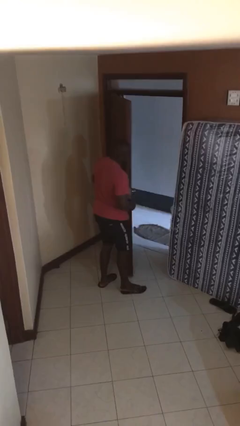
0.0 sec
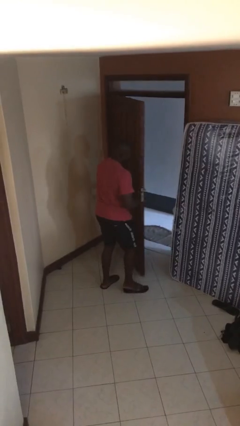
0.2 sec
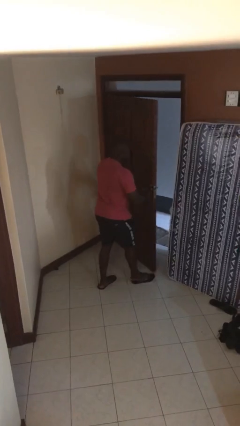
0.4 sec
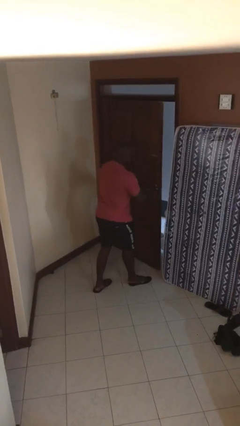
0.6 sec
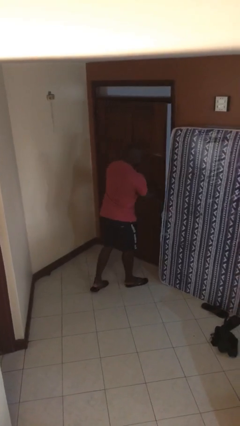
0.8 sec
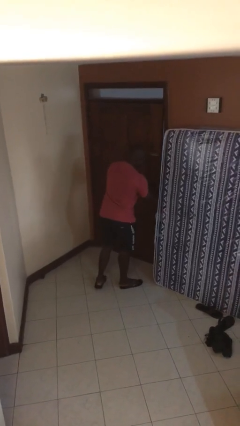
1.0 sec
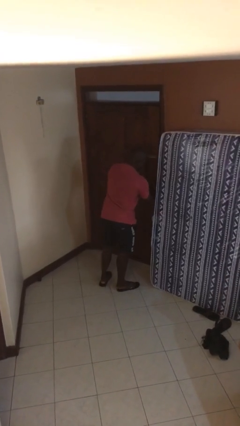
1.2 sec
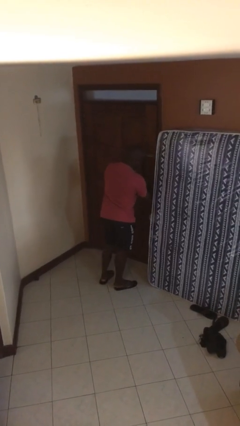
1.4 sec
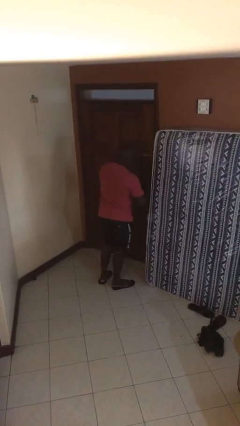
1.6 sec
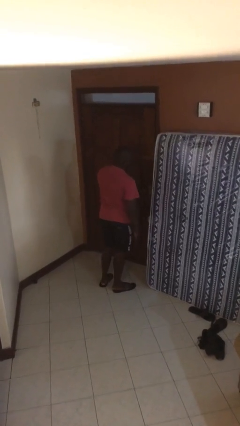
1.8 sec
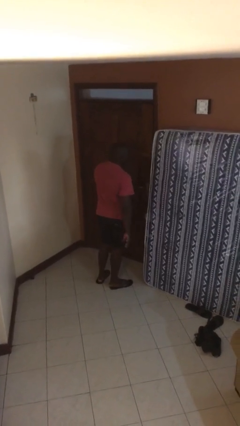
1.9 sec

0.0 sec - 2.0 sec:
person closes facility door

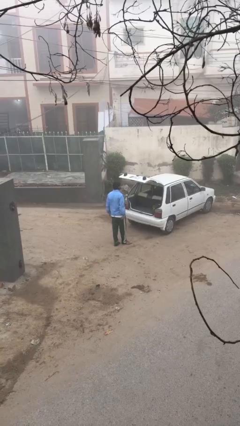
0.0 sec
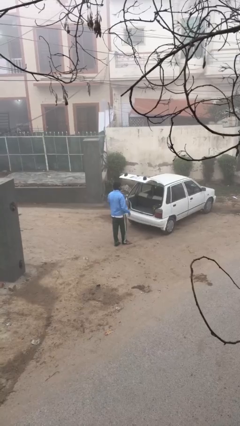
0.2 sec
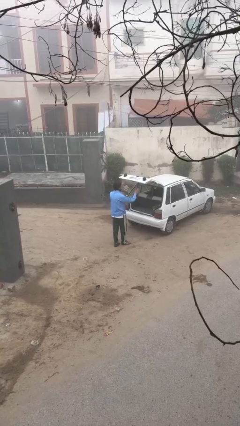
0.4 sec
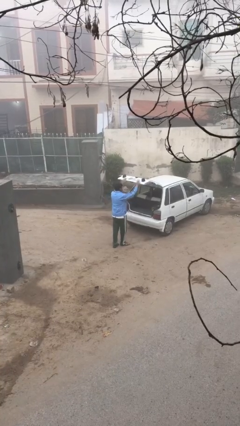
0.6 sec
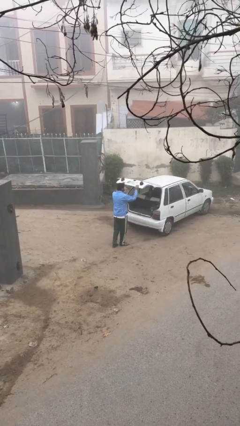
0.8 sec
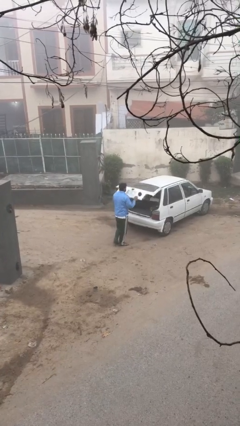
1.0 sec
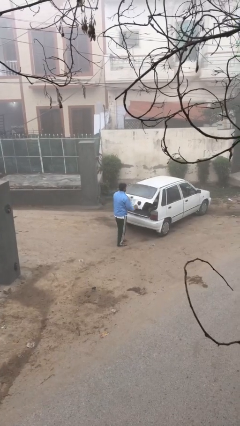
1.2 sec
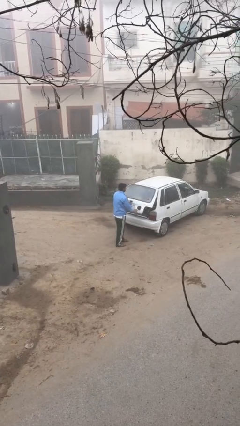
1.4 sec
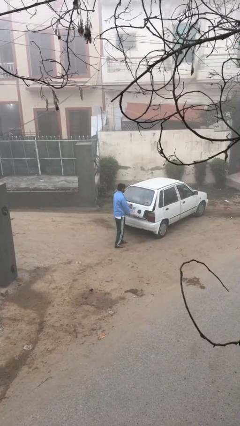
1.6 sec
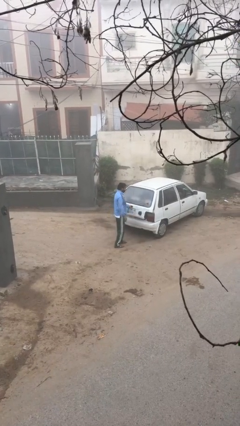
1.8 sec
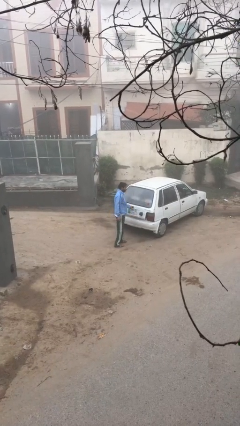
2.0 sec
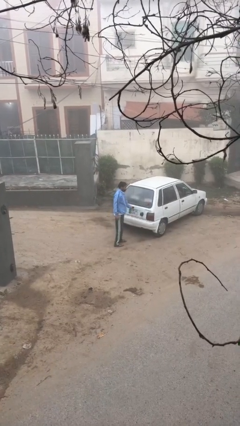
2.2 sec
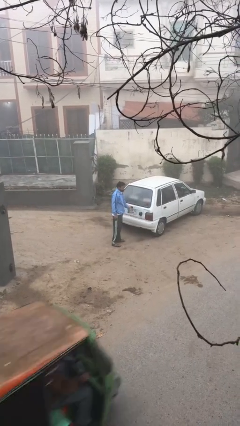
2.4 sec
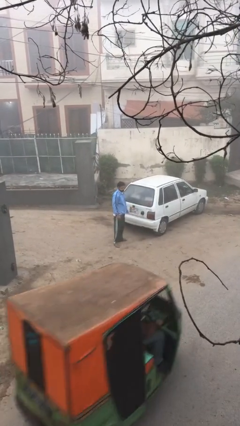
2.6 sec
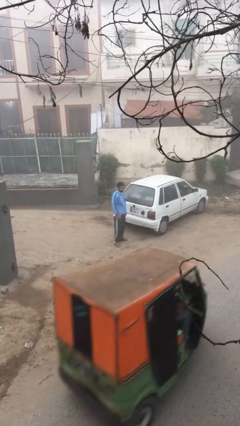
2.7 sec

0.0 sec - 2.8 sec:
person closes car trunk

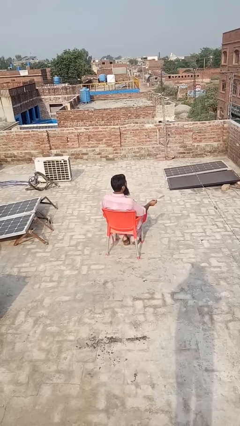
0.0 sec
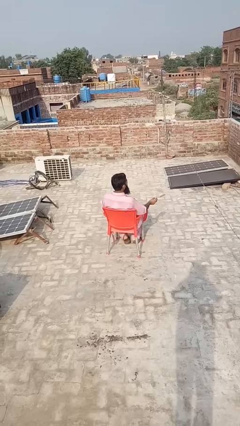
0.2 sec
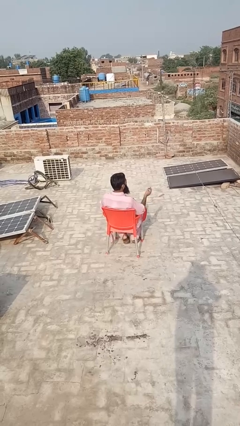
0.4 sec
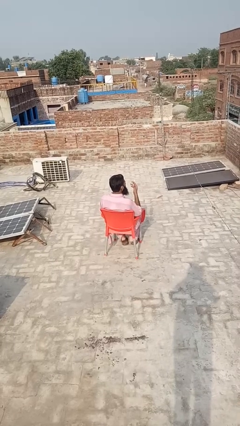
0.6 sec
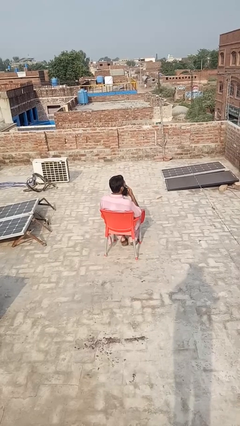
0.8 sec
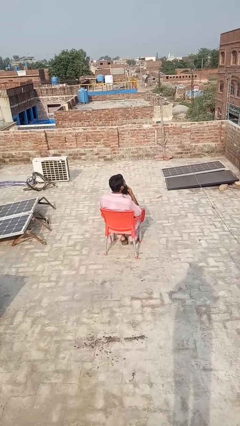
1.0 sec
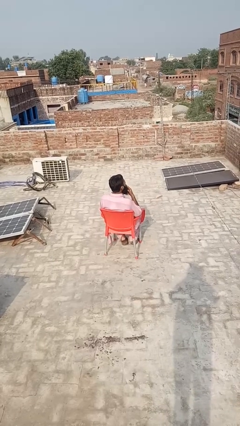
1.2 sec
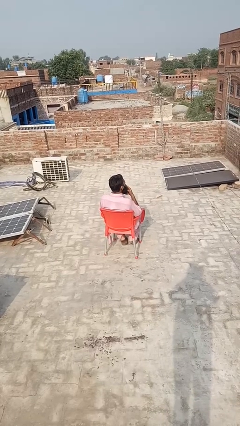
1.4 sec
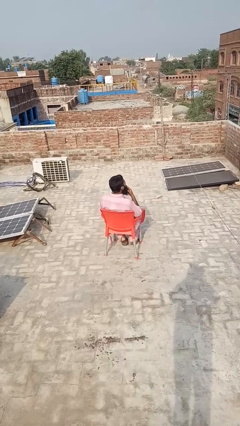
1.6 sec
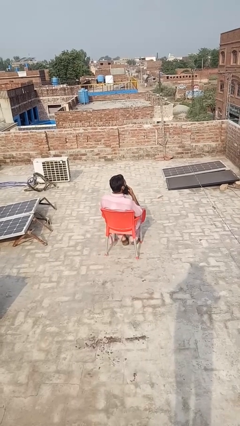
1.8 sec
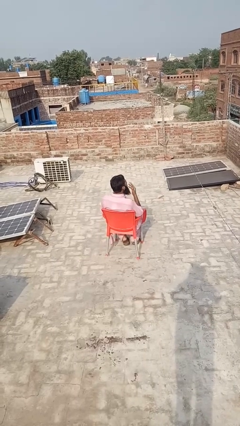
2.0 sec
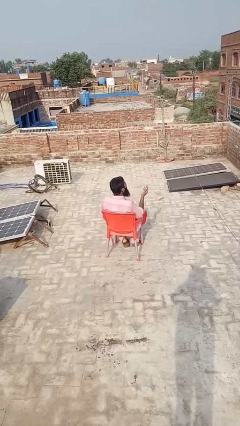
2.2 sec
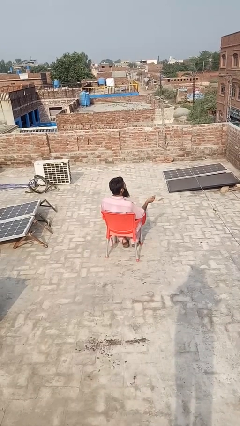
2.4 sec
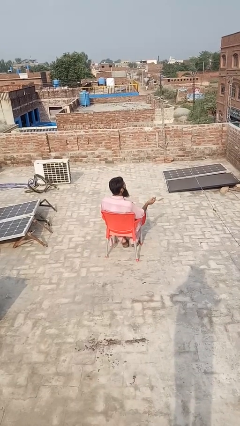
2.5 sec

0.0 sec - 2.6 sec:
person vapes

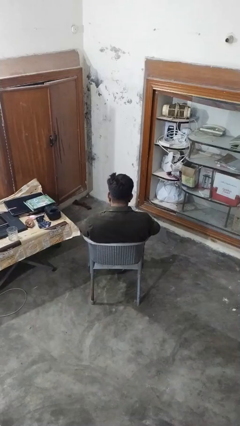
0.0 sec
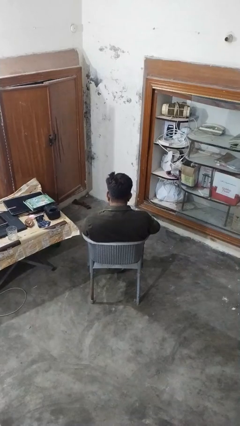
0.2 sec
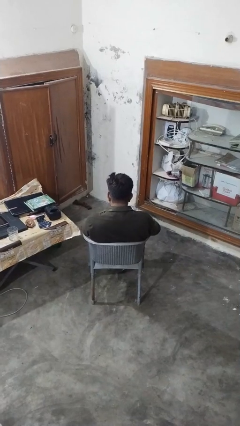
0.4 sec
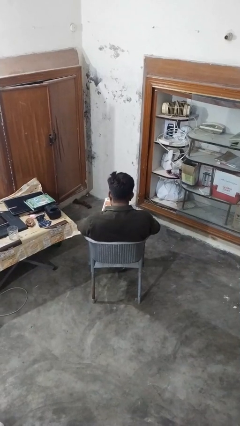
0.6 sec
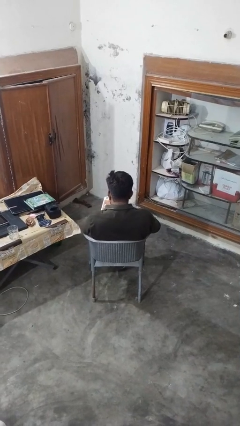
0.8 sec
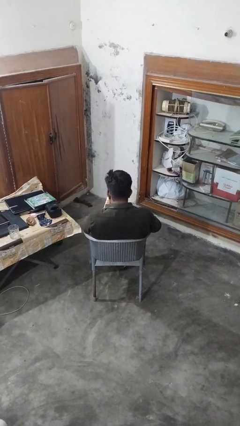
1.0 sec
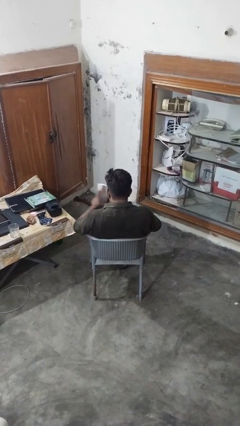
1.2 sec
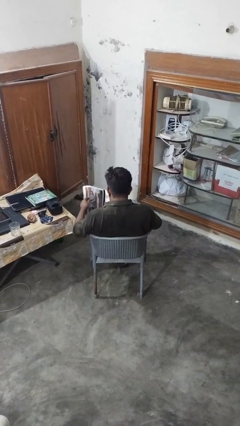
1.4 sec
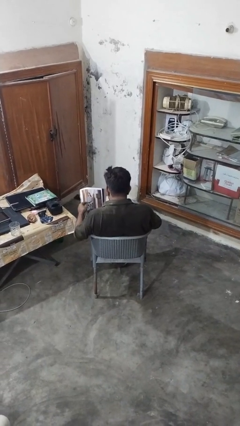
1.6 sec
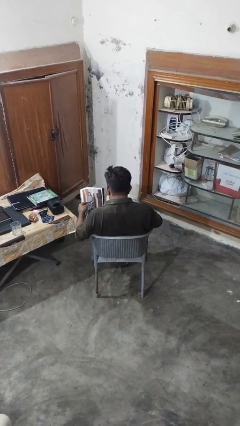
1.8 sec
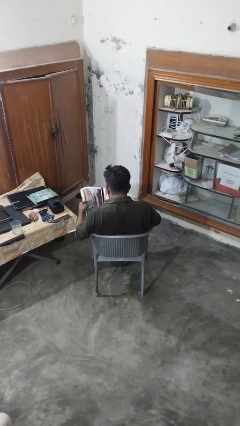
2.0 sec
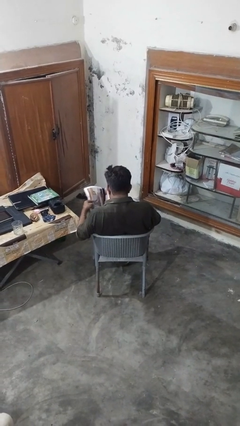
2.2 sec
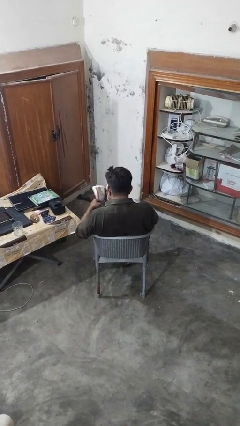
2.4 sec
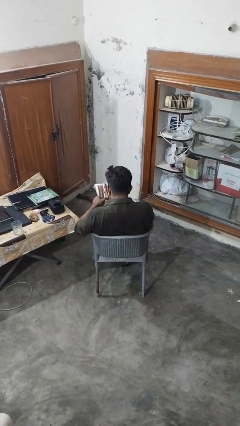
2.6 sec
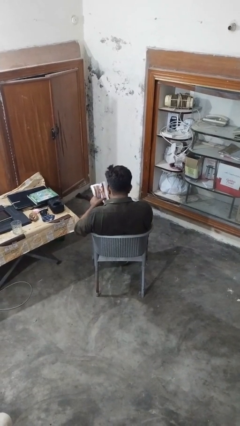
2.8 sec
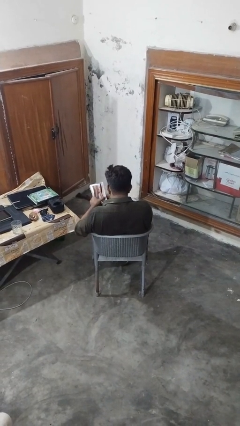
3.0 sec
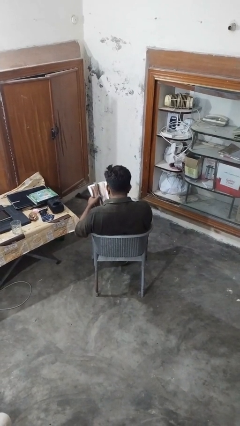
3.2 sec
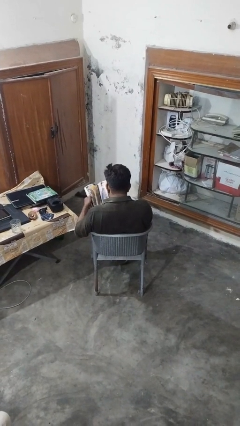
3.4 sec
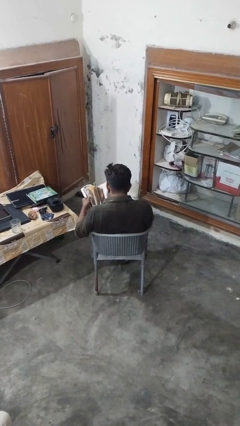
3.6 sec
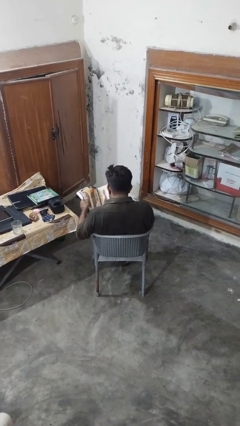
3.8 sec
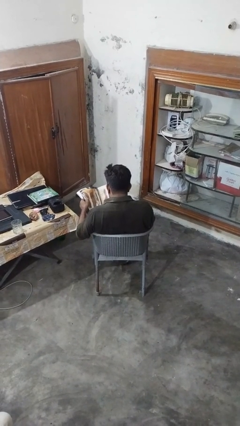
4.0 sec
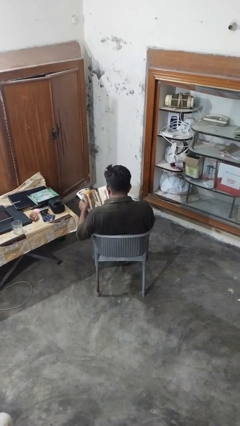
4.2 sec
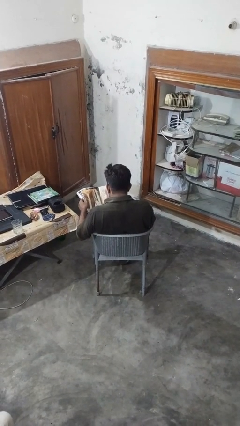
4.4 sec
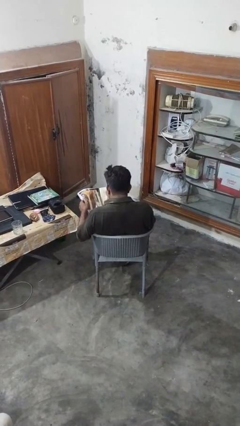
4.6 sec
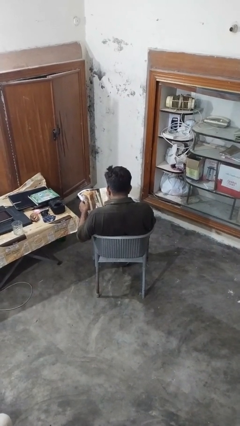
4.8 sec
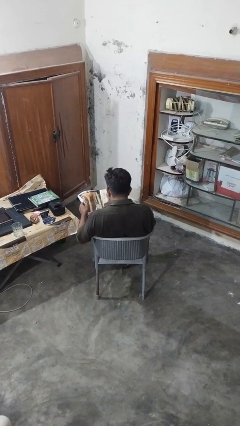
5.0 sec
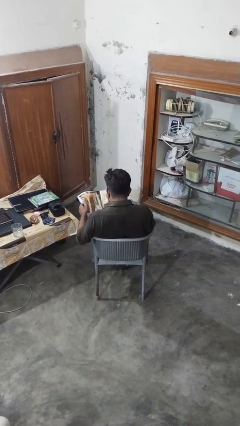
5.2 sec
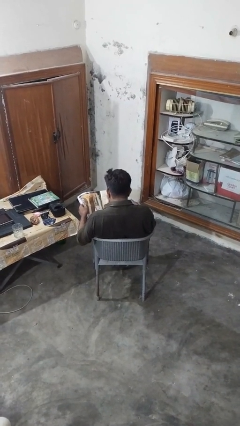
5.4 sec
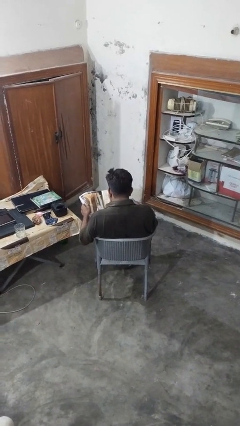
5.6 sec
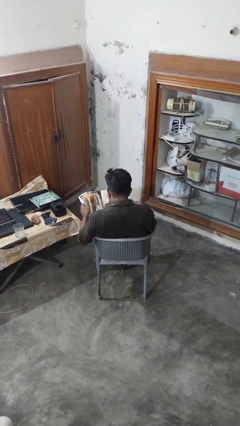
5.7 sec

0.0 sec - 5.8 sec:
person reads magazine

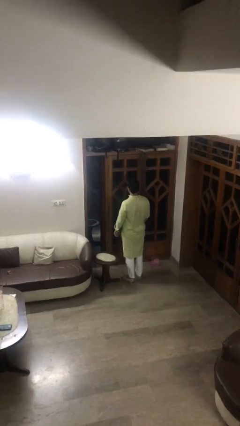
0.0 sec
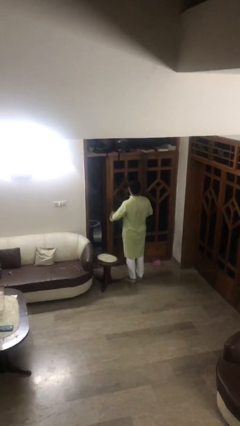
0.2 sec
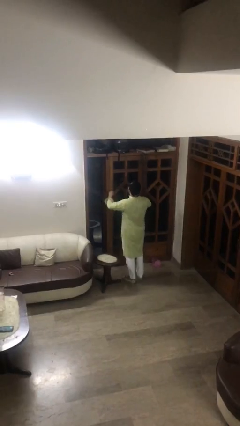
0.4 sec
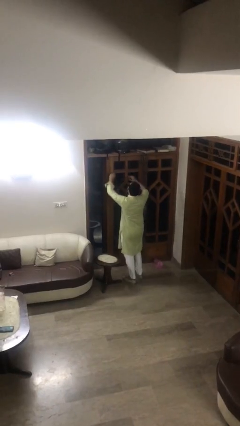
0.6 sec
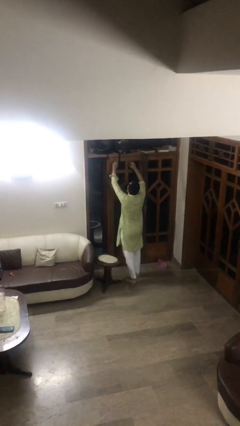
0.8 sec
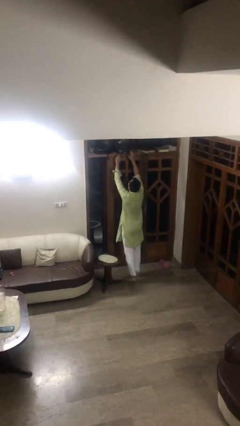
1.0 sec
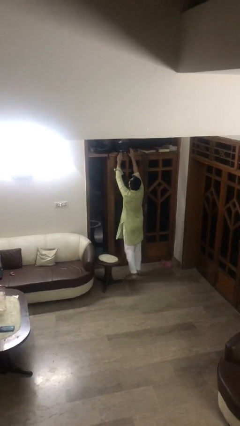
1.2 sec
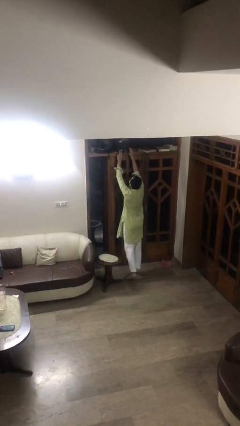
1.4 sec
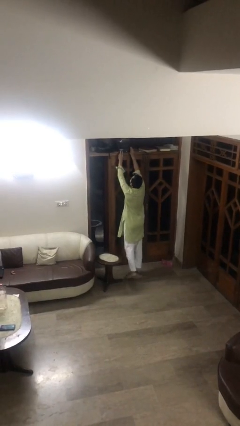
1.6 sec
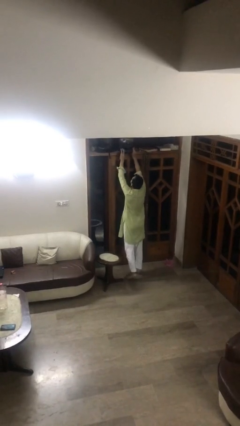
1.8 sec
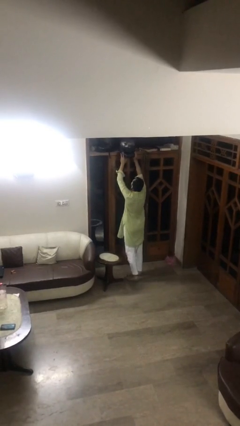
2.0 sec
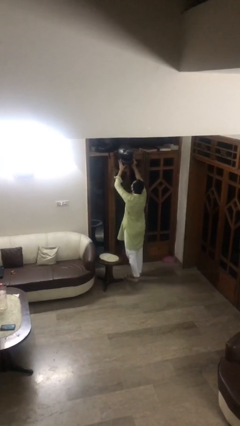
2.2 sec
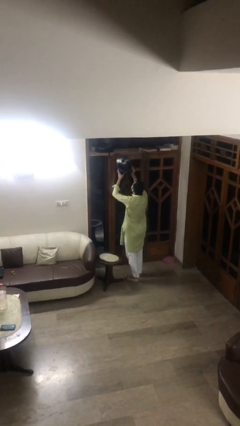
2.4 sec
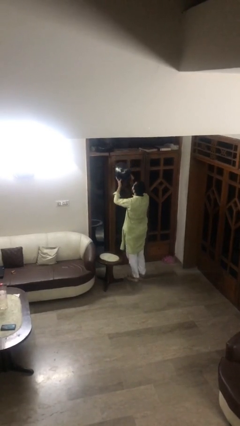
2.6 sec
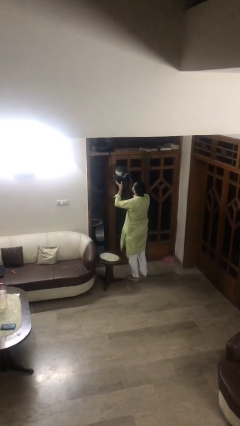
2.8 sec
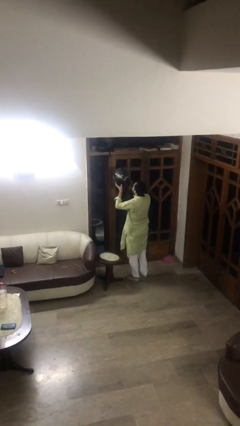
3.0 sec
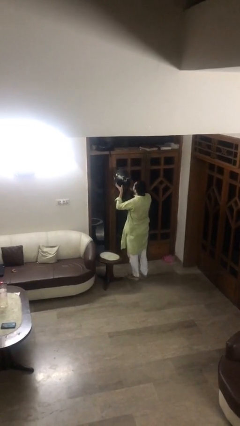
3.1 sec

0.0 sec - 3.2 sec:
person picks up object from shelf

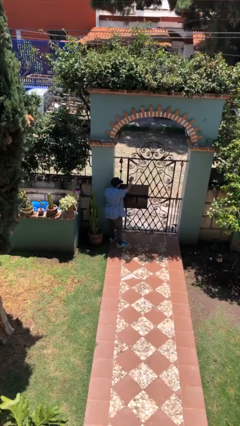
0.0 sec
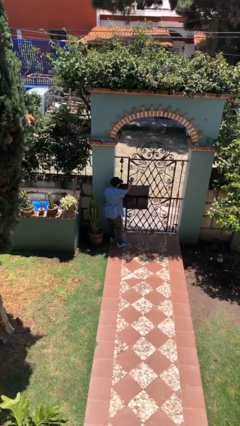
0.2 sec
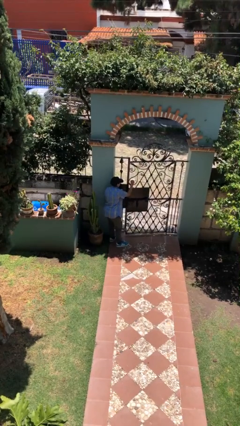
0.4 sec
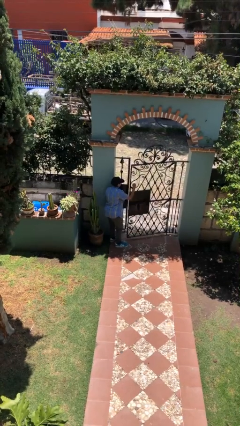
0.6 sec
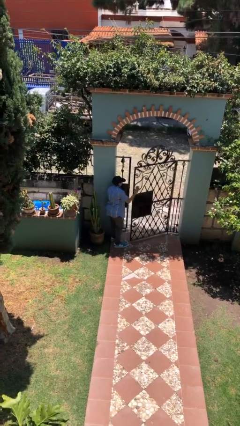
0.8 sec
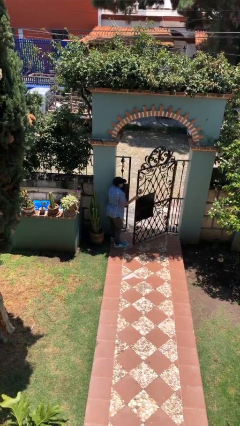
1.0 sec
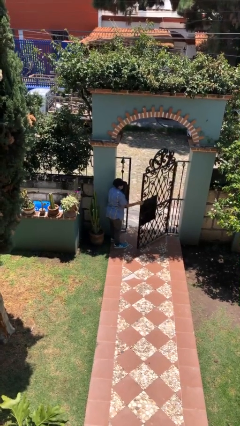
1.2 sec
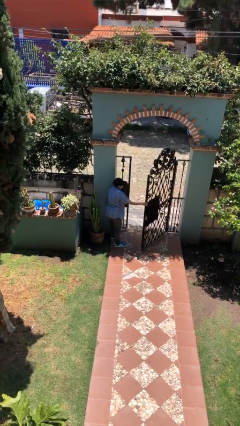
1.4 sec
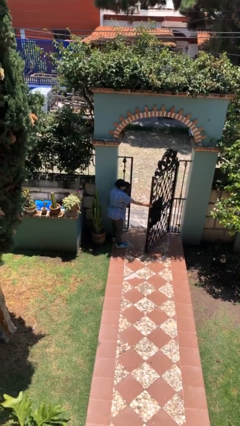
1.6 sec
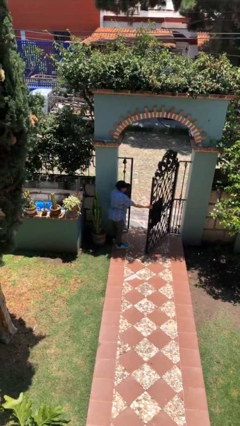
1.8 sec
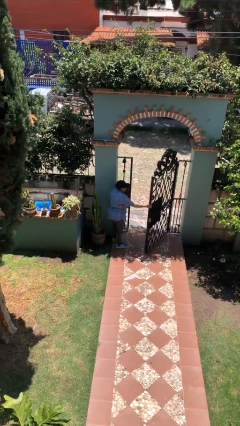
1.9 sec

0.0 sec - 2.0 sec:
person opens facility door
